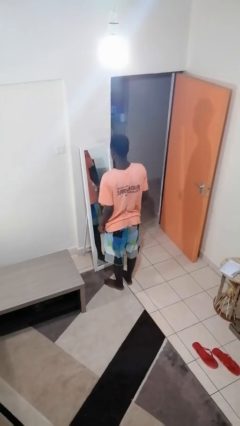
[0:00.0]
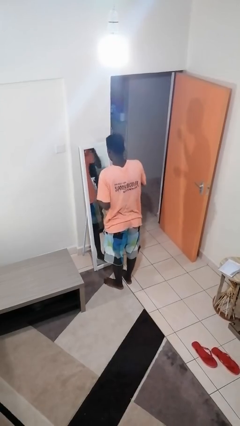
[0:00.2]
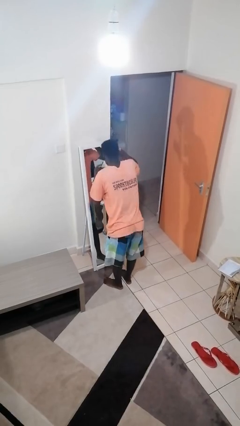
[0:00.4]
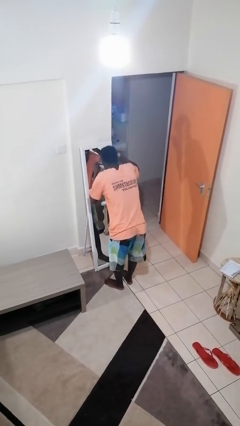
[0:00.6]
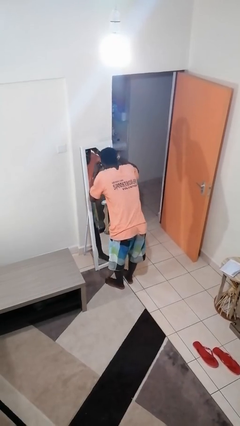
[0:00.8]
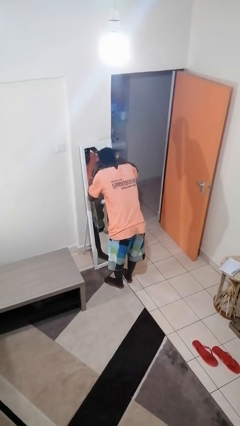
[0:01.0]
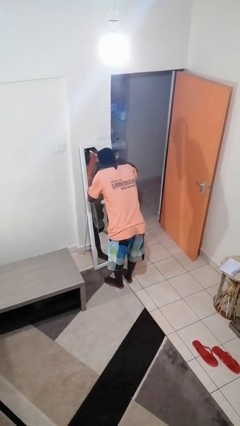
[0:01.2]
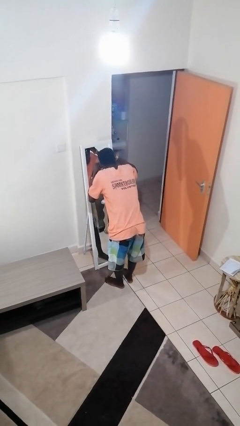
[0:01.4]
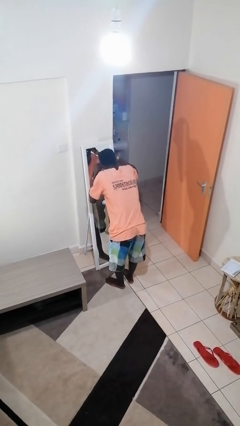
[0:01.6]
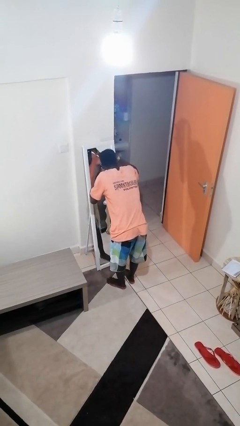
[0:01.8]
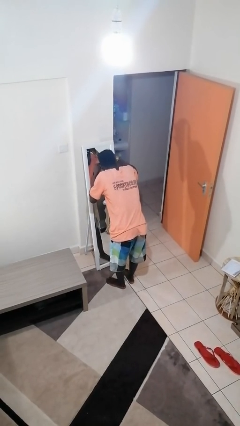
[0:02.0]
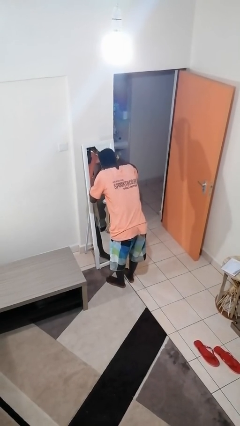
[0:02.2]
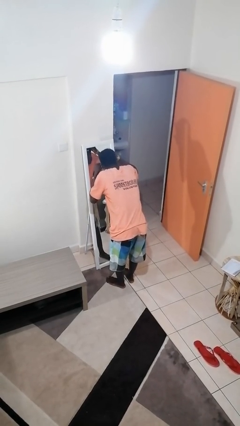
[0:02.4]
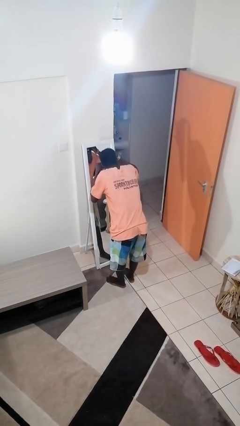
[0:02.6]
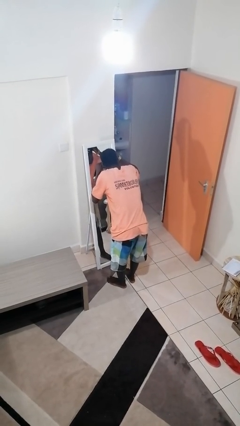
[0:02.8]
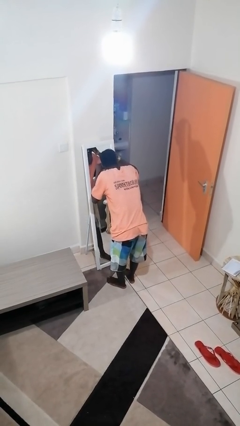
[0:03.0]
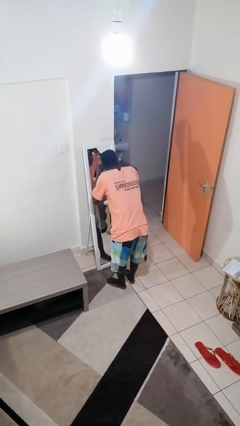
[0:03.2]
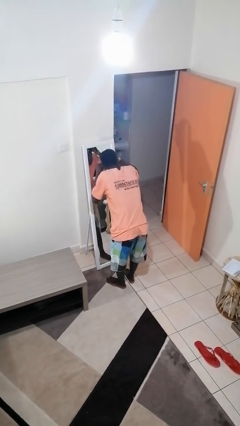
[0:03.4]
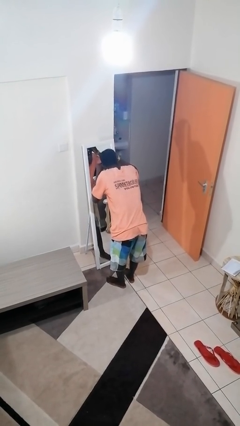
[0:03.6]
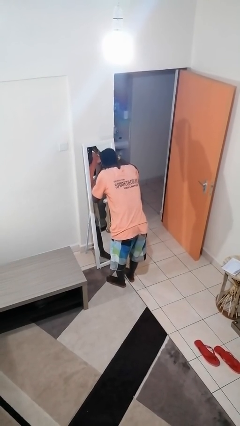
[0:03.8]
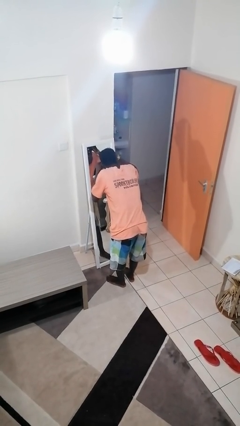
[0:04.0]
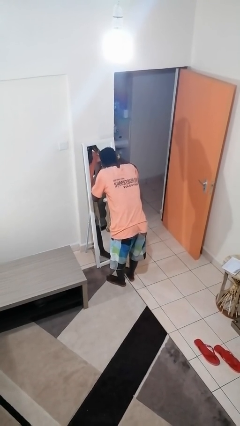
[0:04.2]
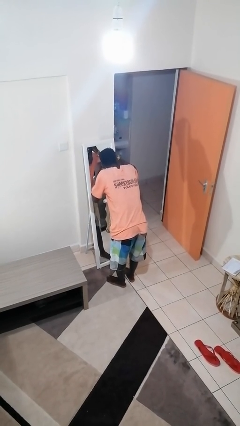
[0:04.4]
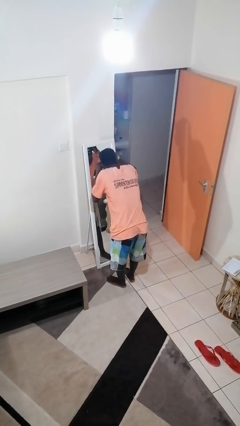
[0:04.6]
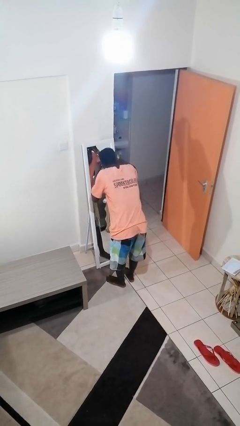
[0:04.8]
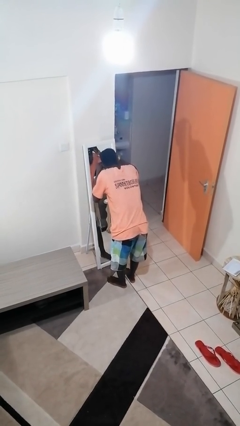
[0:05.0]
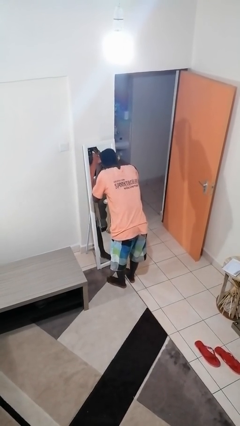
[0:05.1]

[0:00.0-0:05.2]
person applies eye makeup

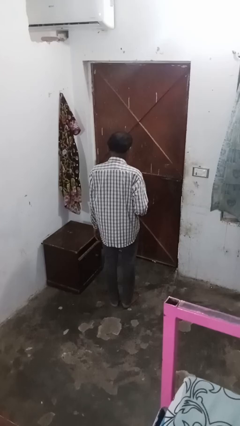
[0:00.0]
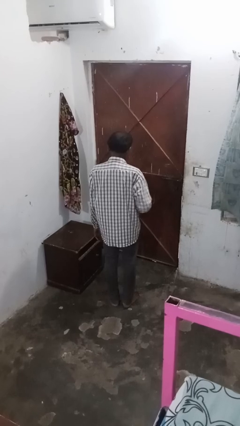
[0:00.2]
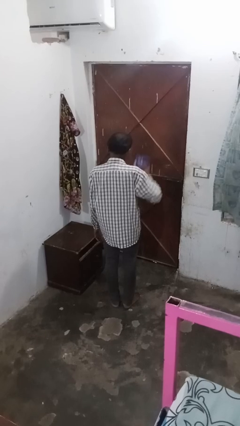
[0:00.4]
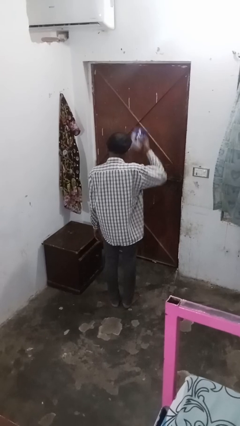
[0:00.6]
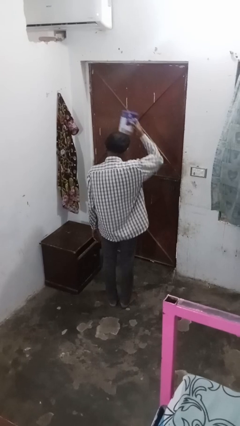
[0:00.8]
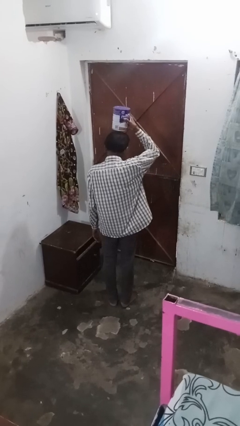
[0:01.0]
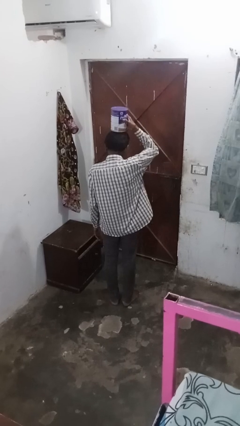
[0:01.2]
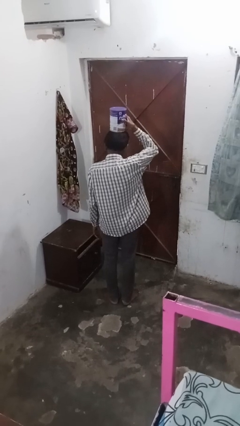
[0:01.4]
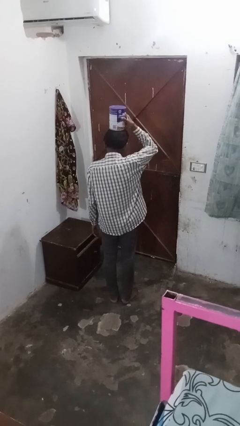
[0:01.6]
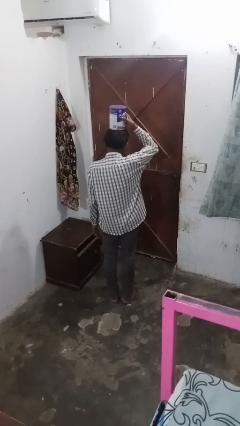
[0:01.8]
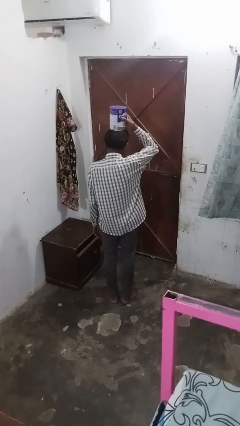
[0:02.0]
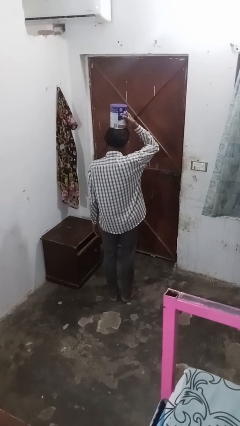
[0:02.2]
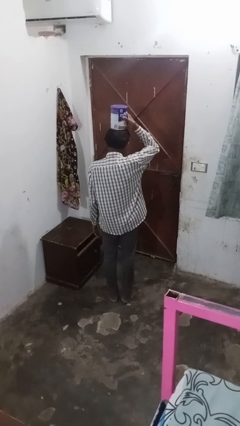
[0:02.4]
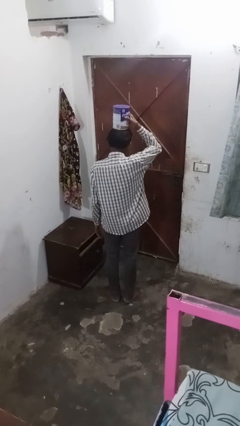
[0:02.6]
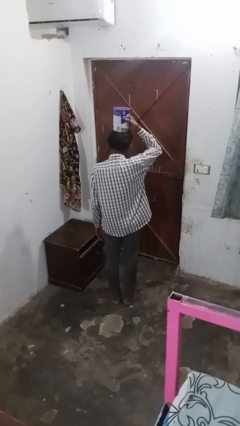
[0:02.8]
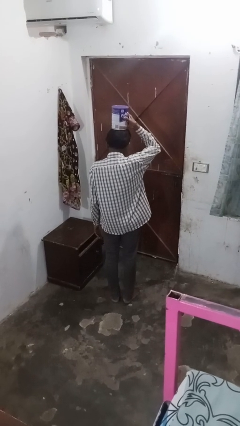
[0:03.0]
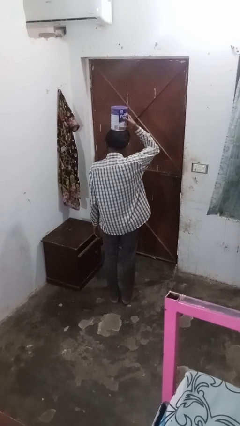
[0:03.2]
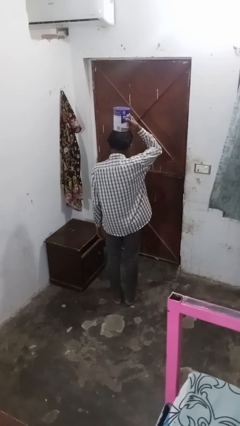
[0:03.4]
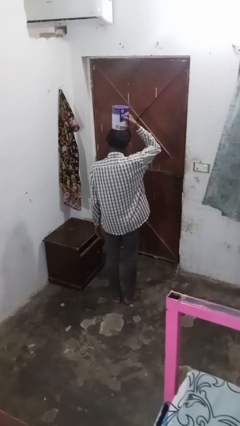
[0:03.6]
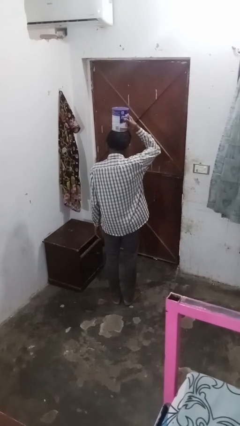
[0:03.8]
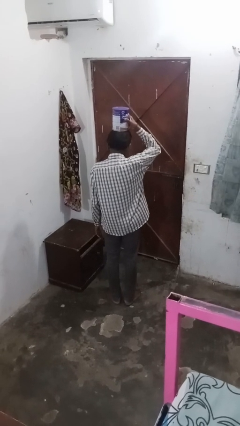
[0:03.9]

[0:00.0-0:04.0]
person holds object above head

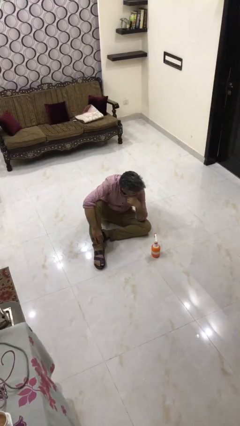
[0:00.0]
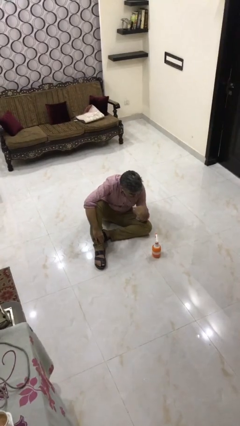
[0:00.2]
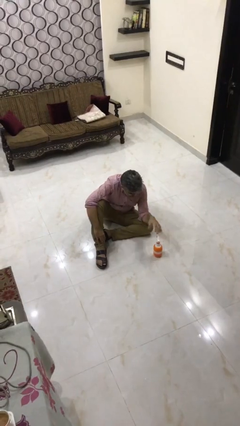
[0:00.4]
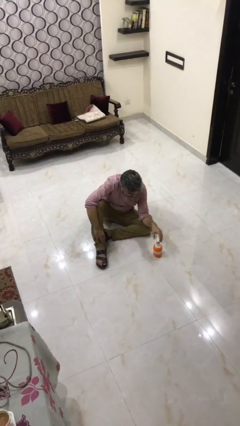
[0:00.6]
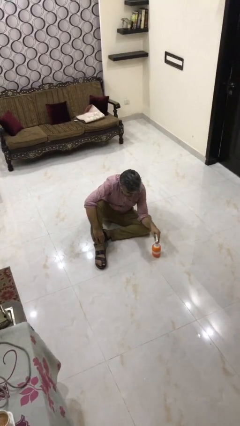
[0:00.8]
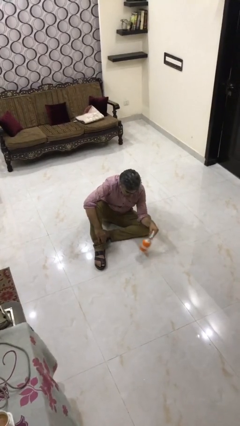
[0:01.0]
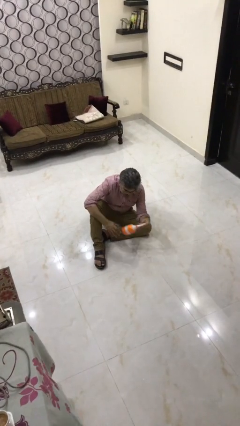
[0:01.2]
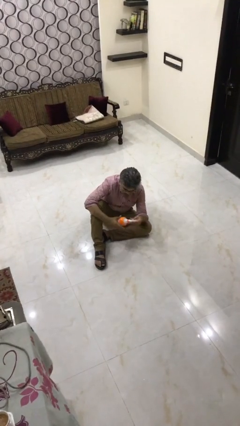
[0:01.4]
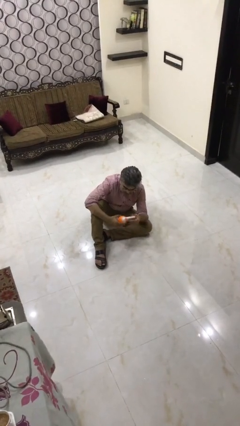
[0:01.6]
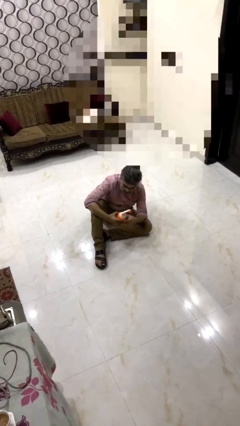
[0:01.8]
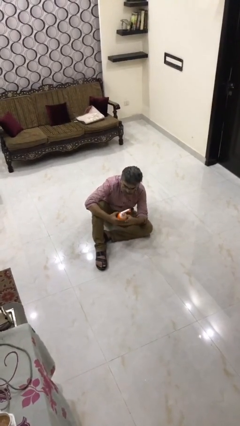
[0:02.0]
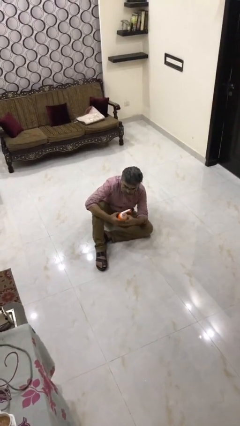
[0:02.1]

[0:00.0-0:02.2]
person picks up object from floor

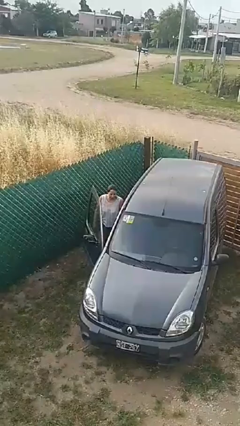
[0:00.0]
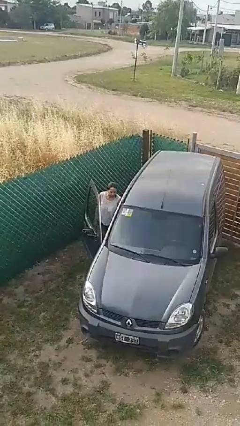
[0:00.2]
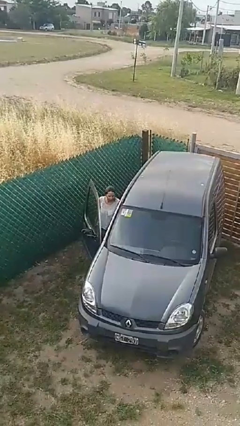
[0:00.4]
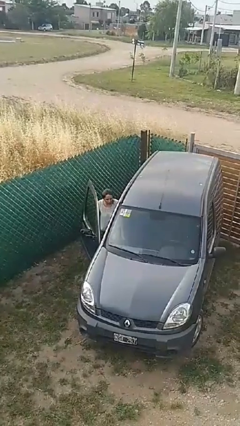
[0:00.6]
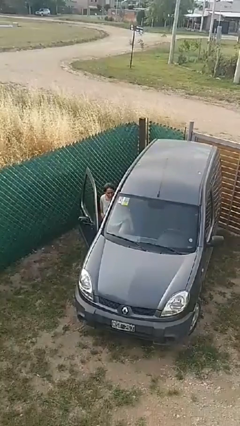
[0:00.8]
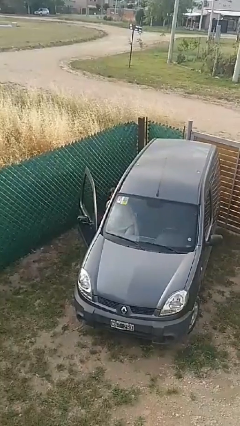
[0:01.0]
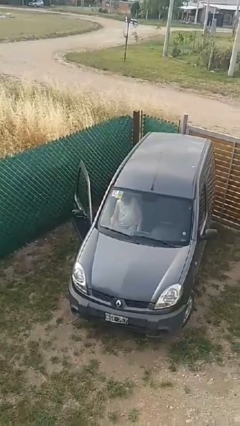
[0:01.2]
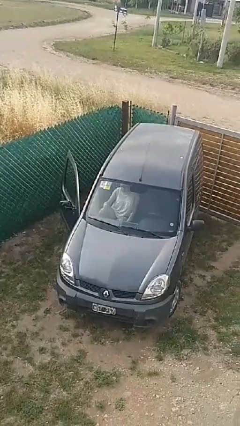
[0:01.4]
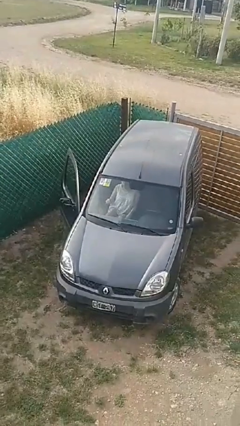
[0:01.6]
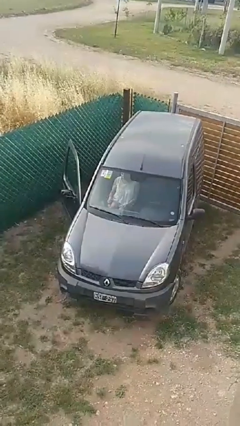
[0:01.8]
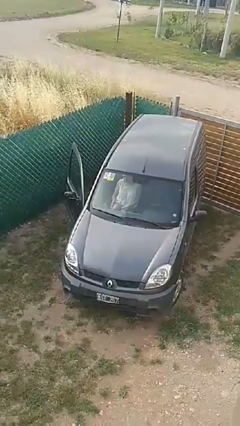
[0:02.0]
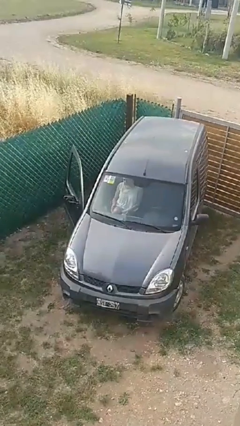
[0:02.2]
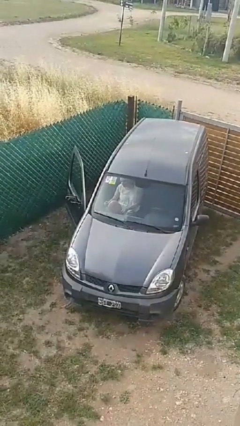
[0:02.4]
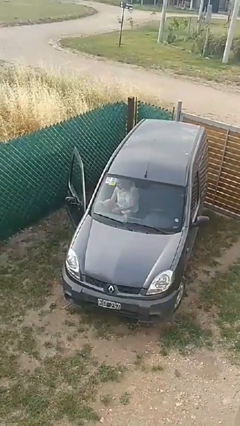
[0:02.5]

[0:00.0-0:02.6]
person enters car

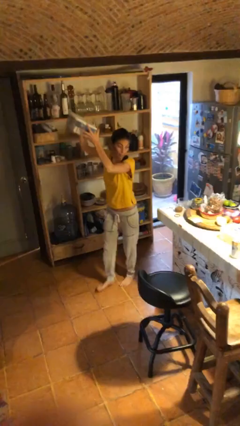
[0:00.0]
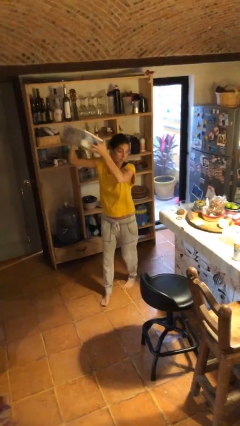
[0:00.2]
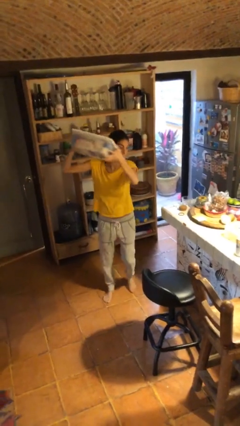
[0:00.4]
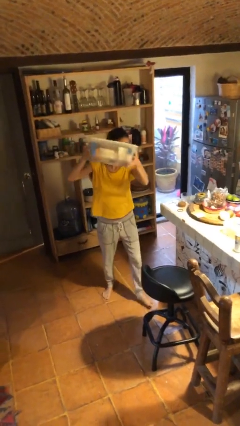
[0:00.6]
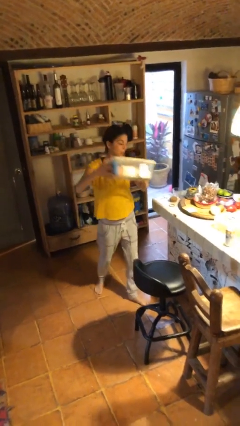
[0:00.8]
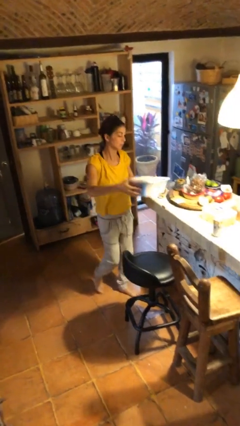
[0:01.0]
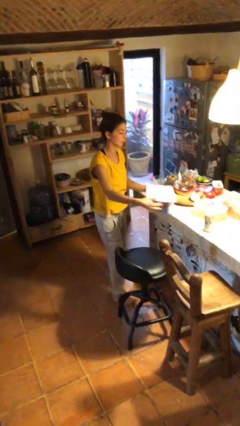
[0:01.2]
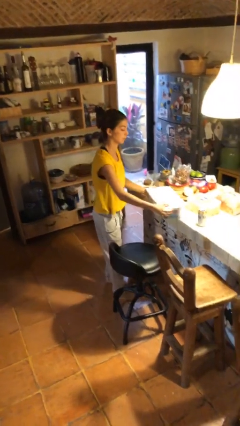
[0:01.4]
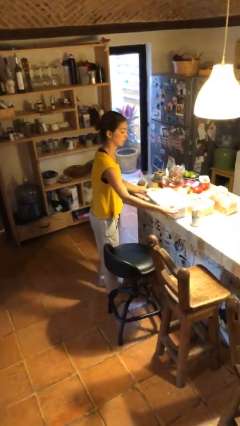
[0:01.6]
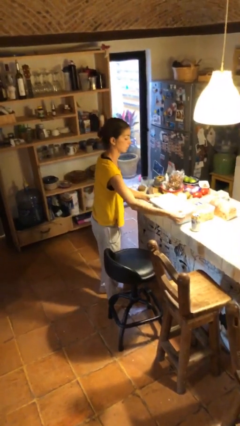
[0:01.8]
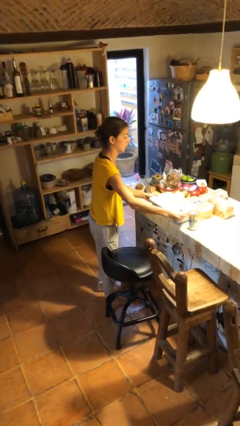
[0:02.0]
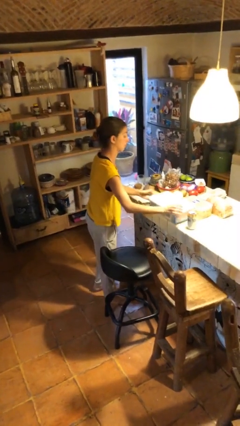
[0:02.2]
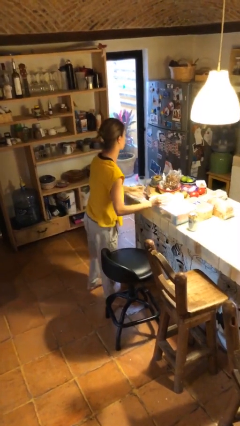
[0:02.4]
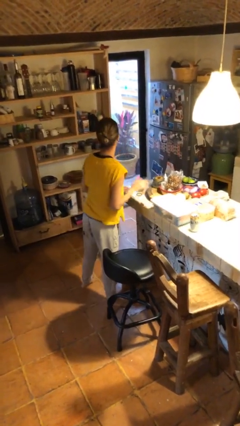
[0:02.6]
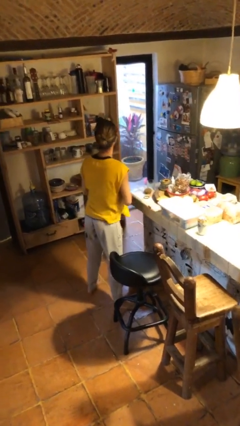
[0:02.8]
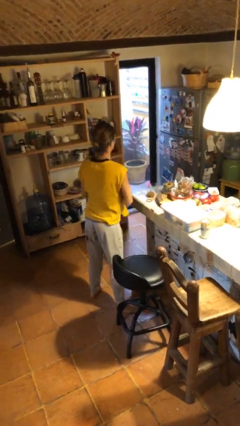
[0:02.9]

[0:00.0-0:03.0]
person puts down object on table

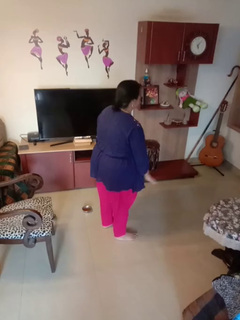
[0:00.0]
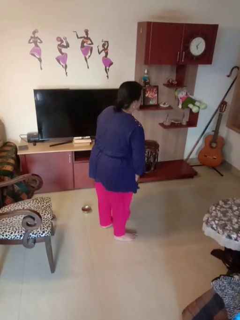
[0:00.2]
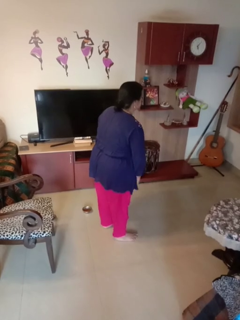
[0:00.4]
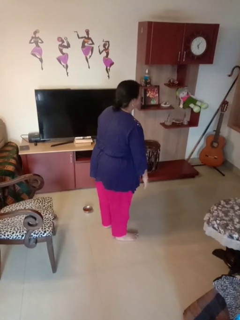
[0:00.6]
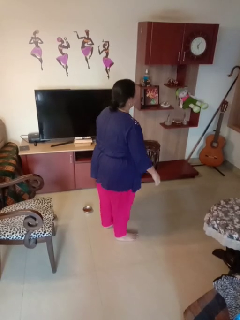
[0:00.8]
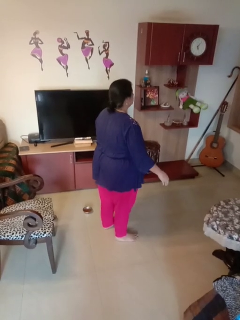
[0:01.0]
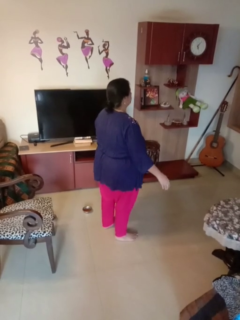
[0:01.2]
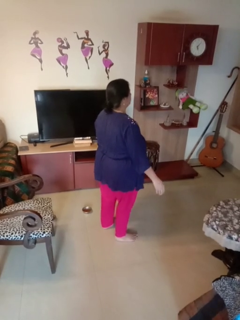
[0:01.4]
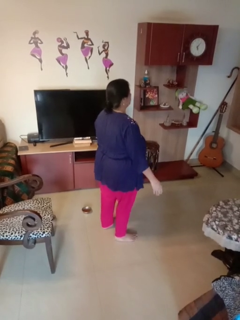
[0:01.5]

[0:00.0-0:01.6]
person slaps hands on thighs
